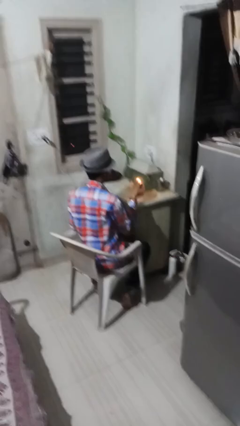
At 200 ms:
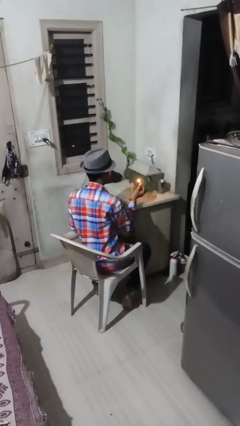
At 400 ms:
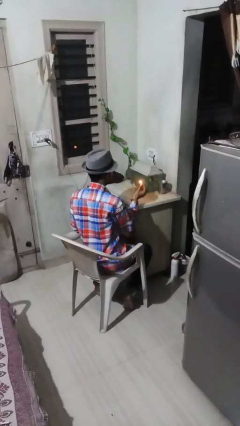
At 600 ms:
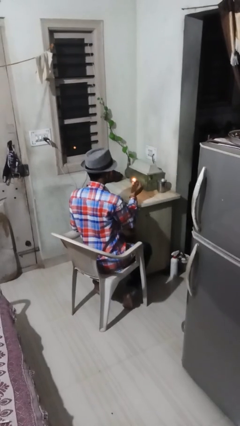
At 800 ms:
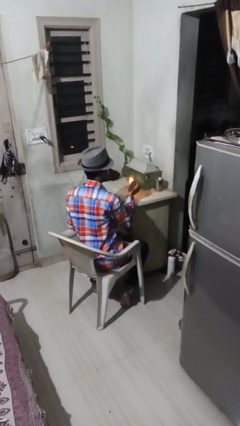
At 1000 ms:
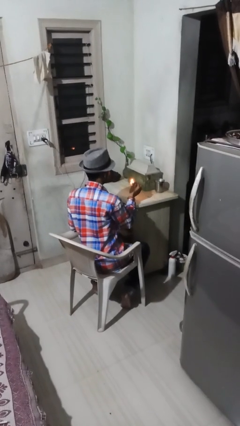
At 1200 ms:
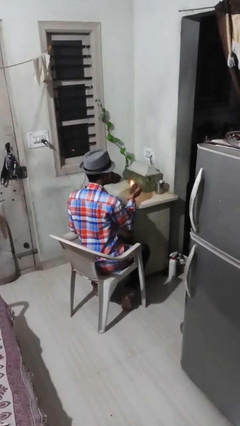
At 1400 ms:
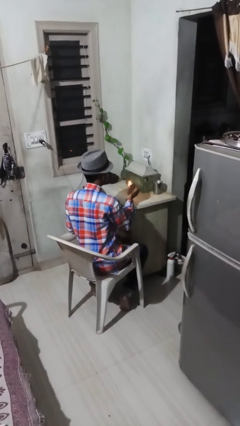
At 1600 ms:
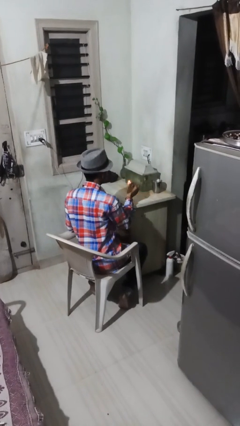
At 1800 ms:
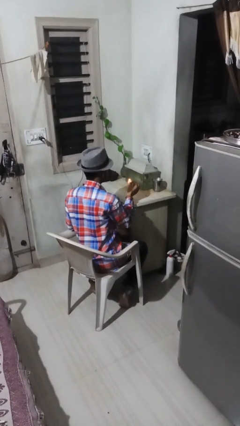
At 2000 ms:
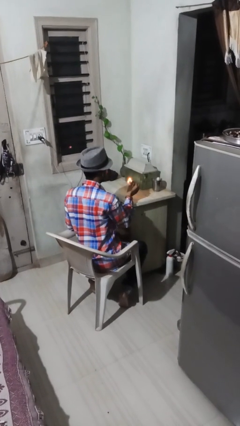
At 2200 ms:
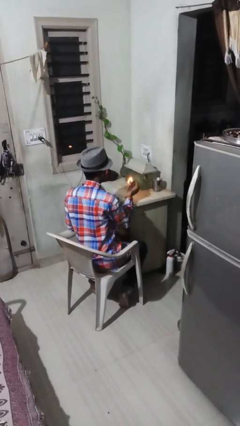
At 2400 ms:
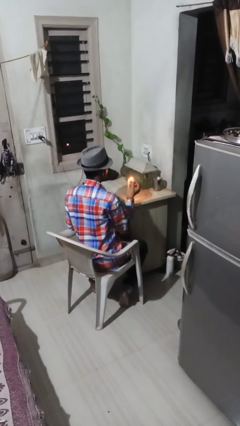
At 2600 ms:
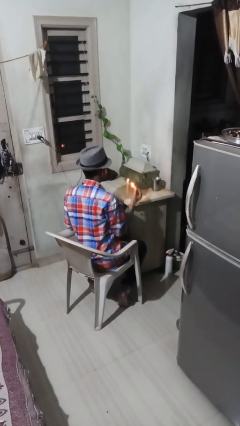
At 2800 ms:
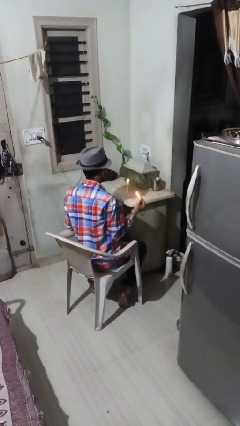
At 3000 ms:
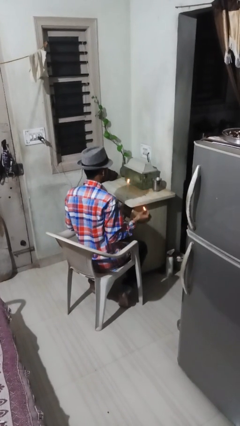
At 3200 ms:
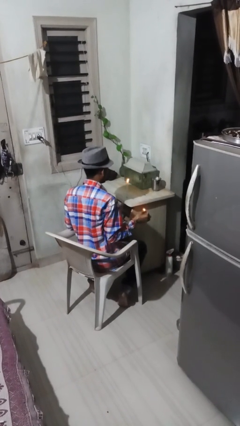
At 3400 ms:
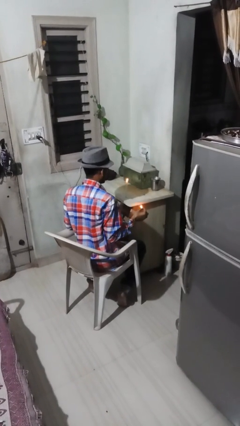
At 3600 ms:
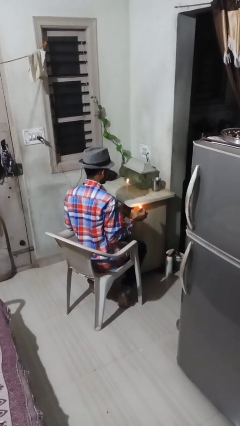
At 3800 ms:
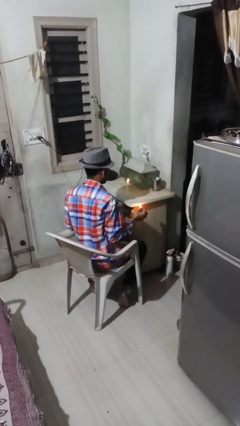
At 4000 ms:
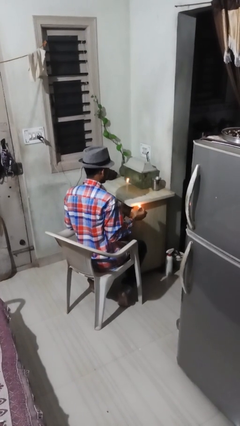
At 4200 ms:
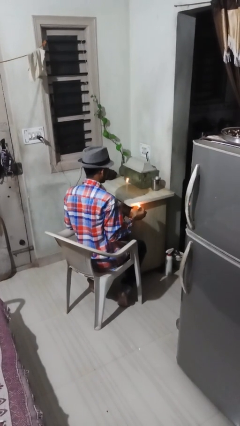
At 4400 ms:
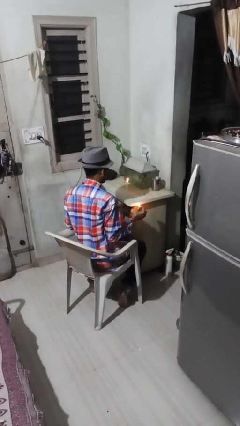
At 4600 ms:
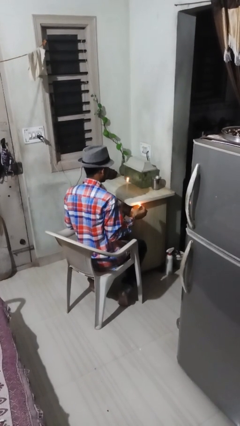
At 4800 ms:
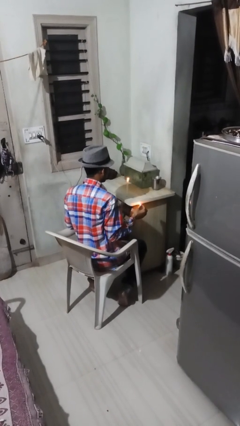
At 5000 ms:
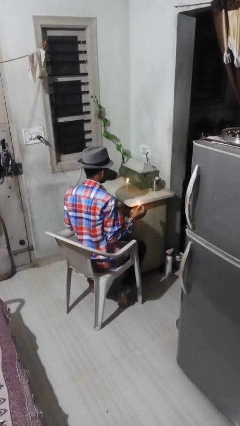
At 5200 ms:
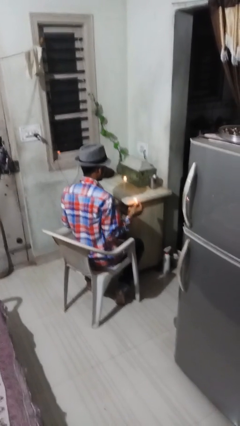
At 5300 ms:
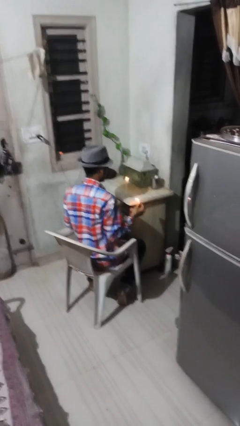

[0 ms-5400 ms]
person lights candle

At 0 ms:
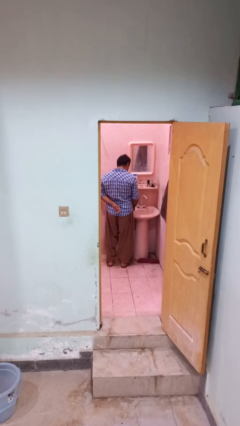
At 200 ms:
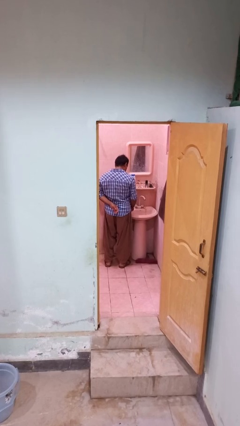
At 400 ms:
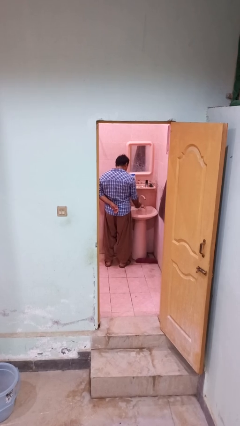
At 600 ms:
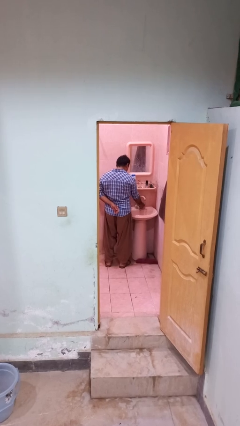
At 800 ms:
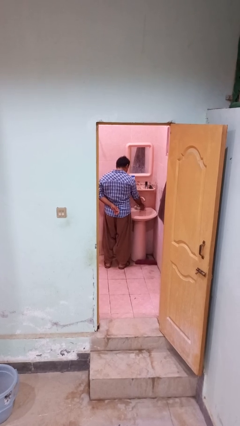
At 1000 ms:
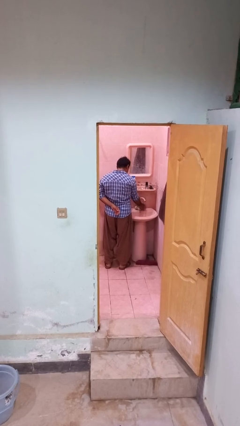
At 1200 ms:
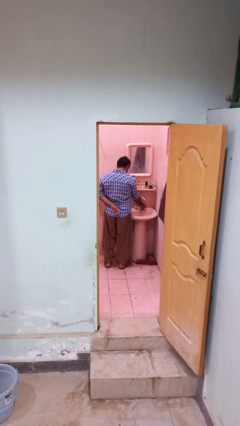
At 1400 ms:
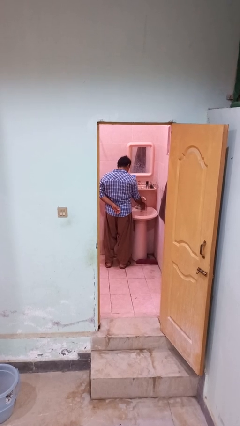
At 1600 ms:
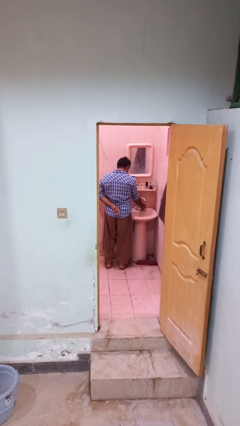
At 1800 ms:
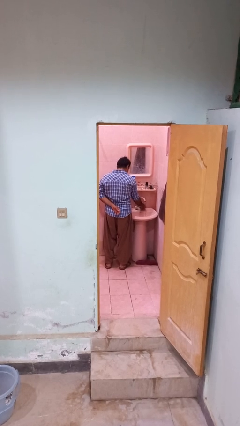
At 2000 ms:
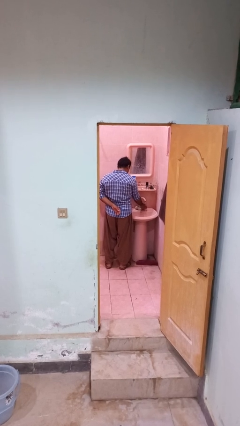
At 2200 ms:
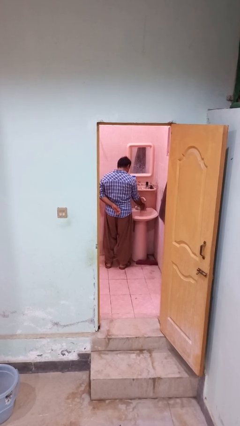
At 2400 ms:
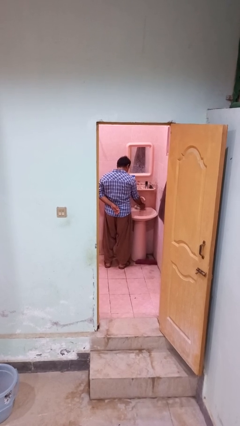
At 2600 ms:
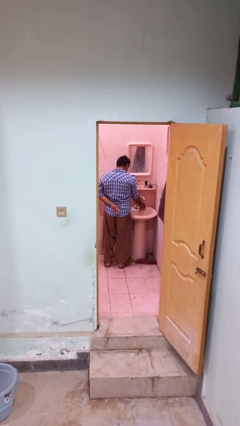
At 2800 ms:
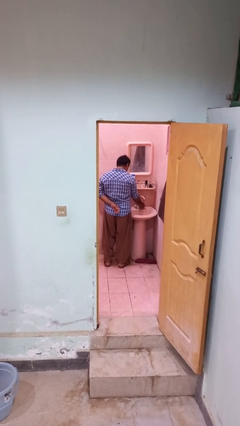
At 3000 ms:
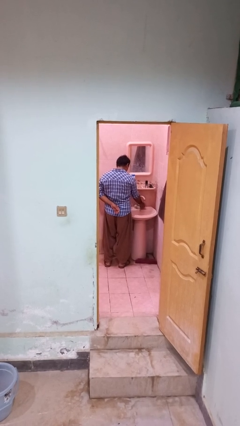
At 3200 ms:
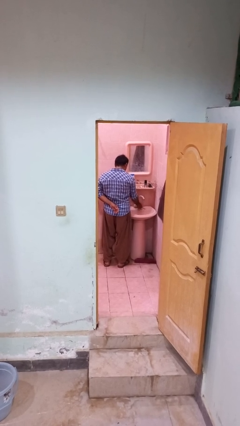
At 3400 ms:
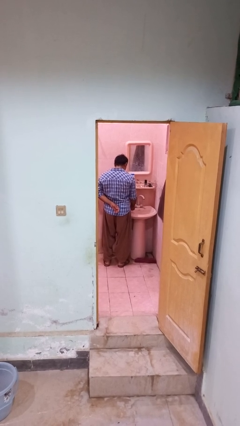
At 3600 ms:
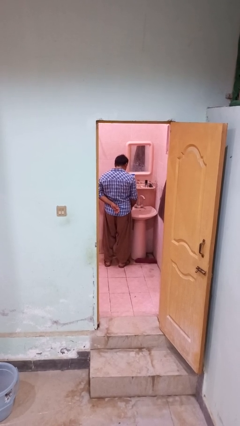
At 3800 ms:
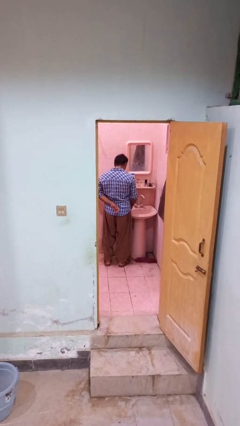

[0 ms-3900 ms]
person turns off faucet

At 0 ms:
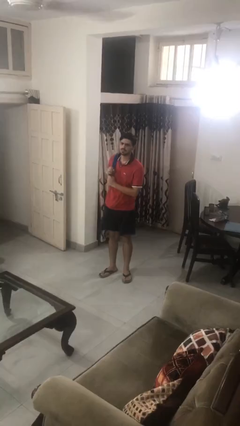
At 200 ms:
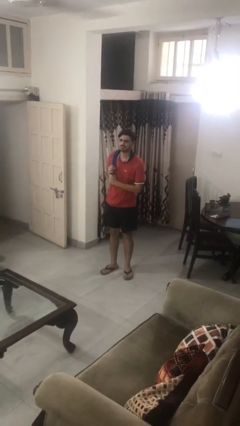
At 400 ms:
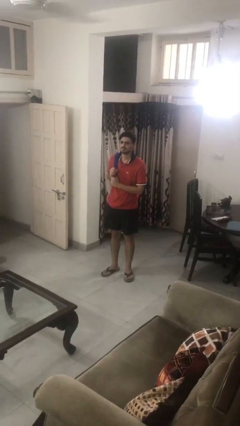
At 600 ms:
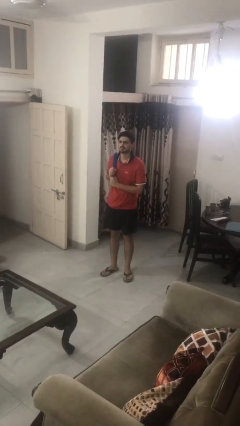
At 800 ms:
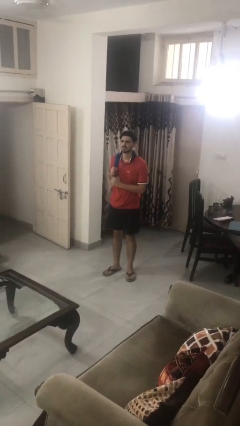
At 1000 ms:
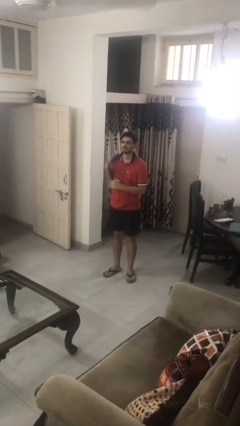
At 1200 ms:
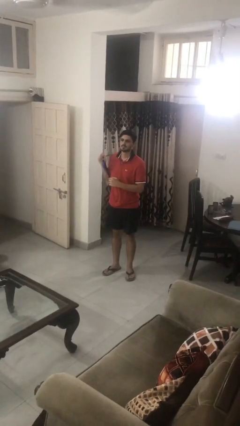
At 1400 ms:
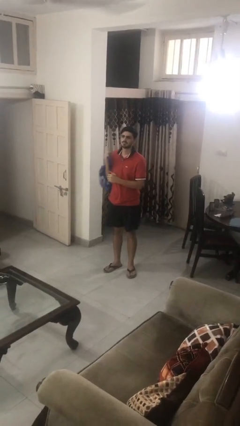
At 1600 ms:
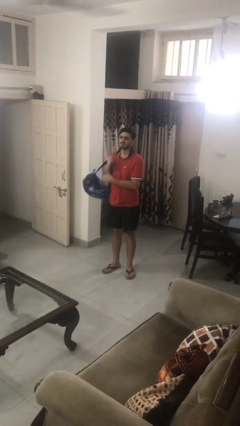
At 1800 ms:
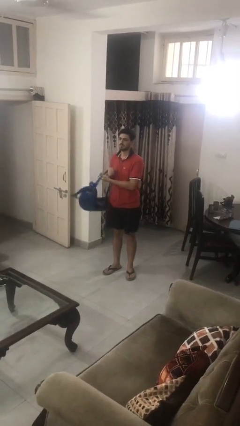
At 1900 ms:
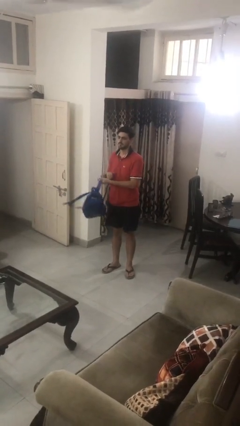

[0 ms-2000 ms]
person takes off backpack

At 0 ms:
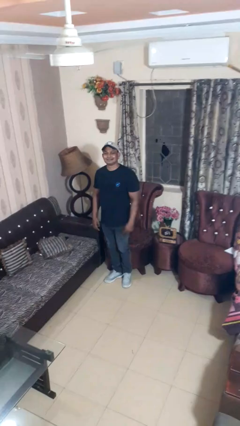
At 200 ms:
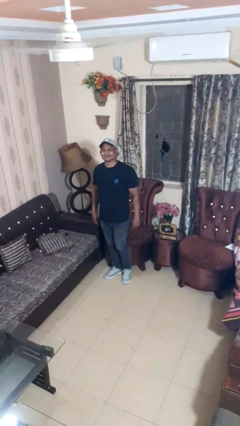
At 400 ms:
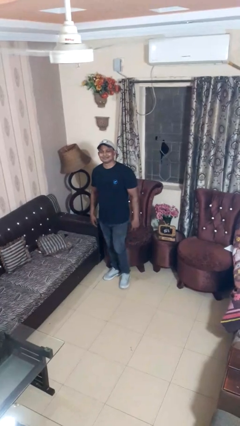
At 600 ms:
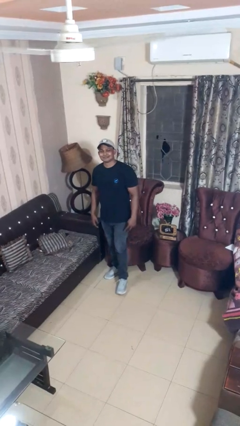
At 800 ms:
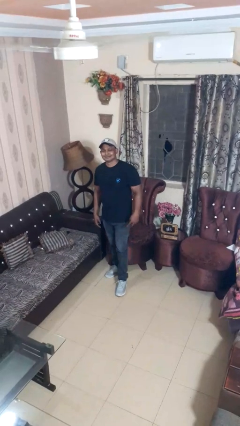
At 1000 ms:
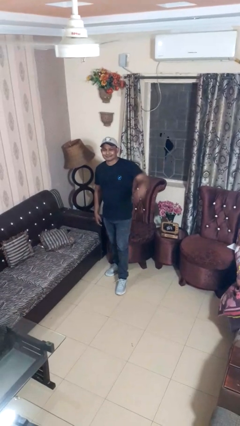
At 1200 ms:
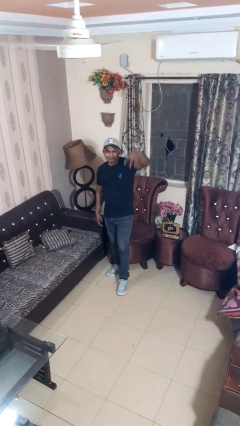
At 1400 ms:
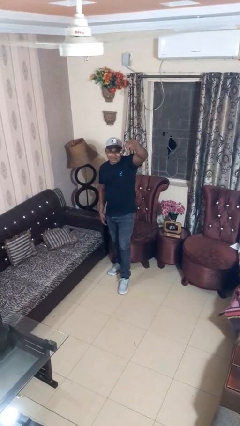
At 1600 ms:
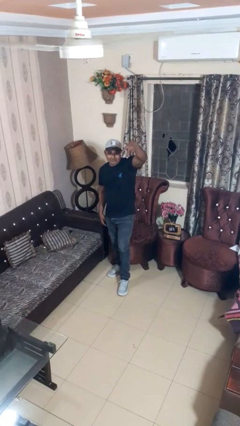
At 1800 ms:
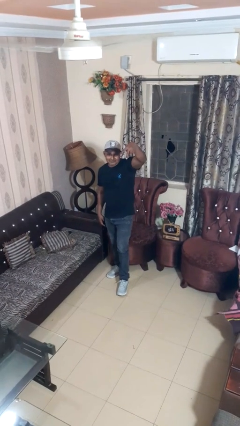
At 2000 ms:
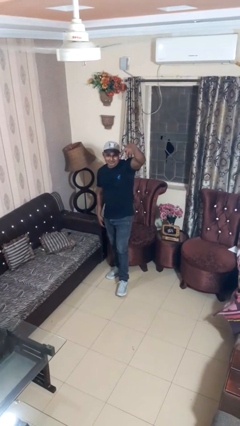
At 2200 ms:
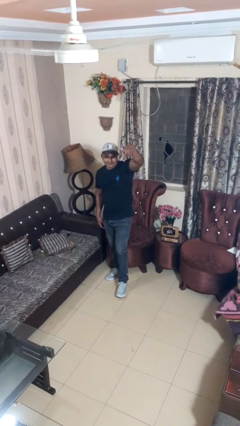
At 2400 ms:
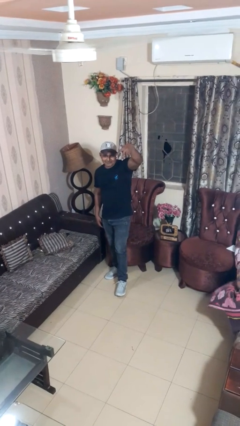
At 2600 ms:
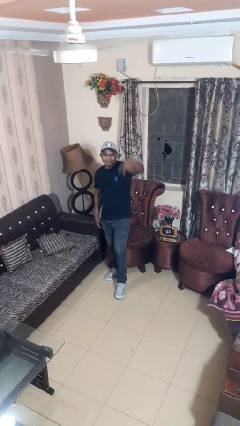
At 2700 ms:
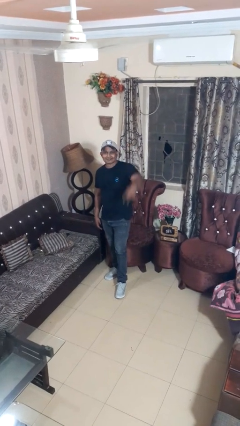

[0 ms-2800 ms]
person gestures peace

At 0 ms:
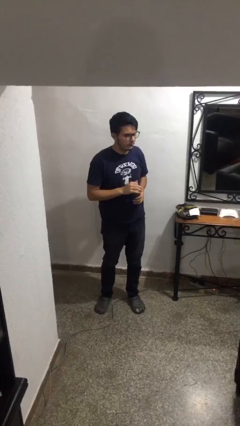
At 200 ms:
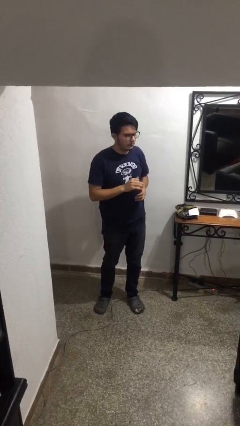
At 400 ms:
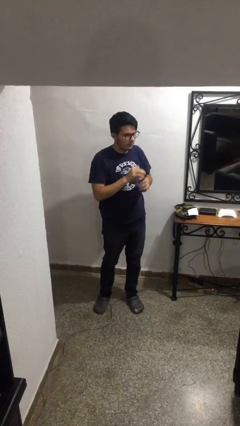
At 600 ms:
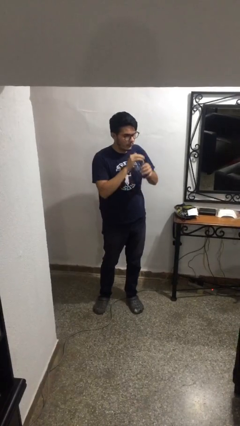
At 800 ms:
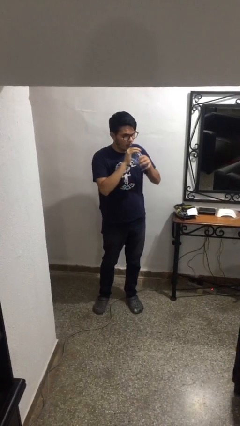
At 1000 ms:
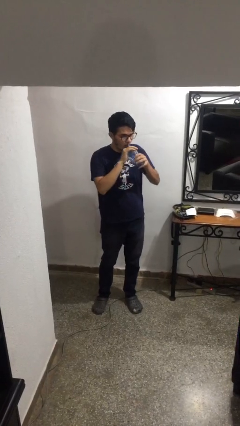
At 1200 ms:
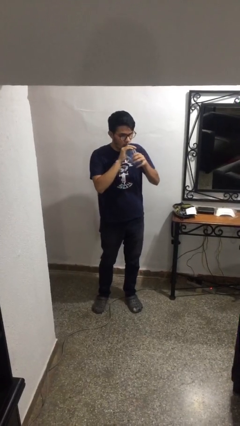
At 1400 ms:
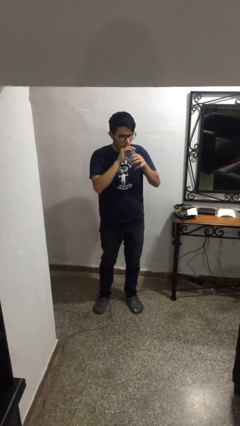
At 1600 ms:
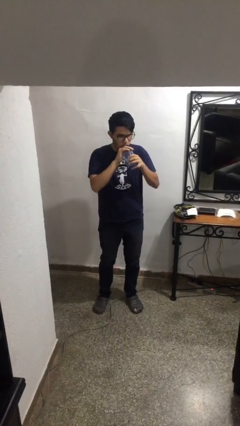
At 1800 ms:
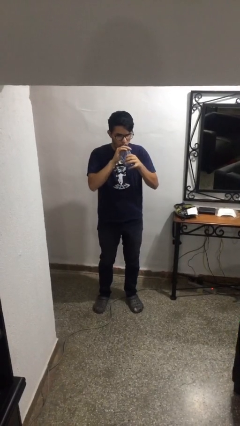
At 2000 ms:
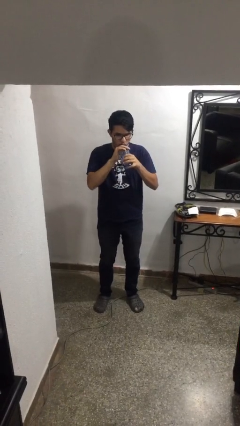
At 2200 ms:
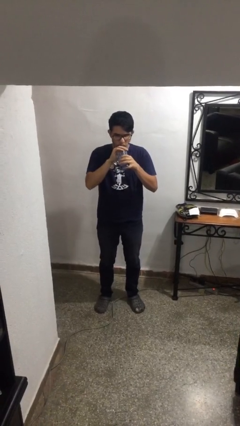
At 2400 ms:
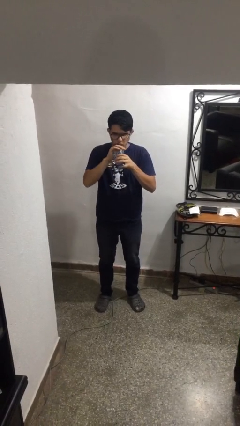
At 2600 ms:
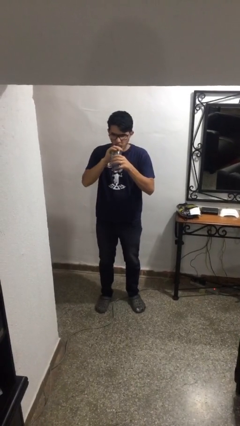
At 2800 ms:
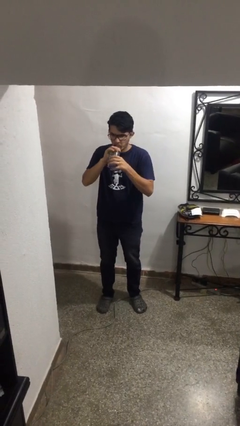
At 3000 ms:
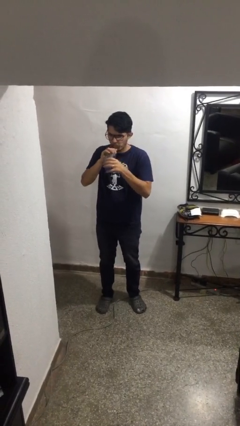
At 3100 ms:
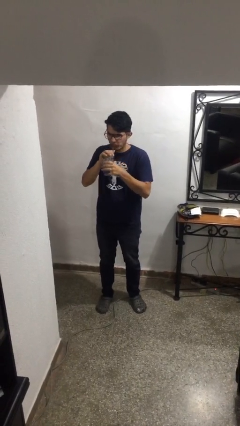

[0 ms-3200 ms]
person drinks from straw

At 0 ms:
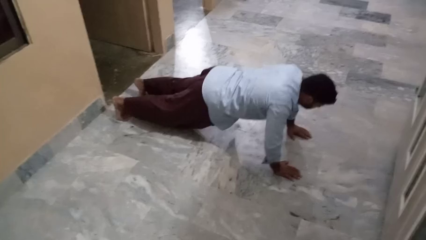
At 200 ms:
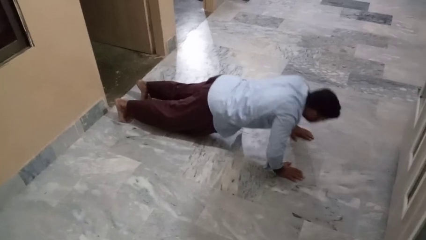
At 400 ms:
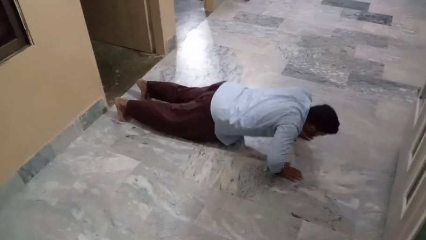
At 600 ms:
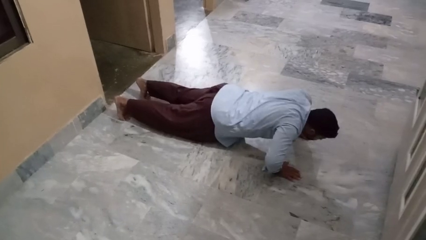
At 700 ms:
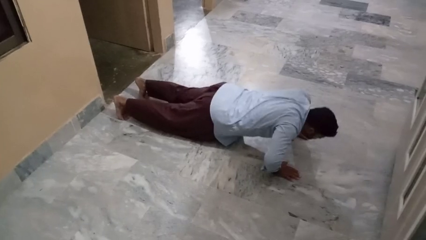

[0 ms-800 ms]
person exercises with pushup
